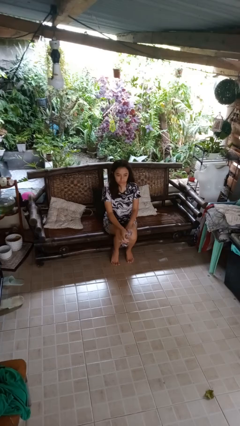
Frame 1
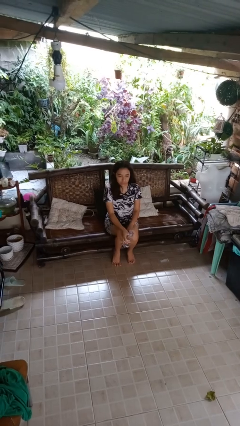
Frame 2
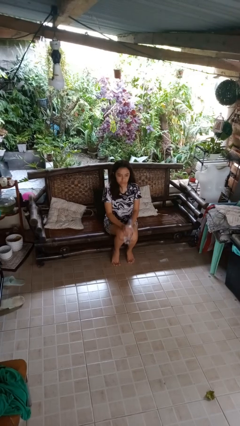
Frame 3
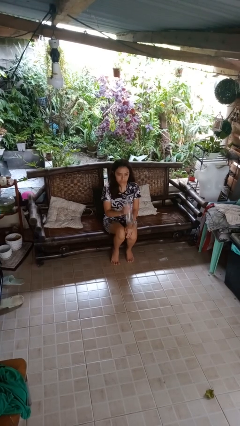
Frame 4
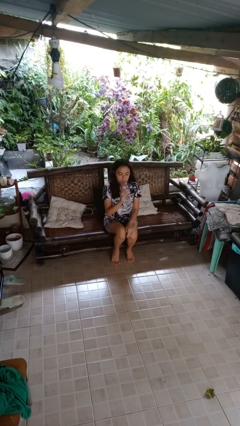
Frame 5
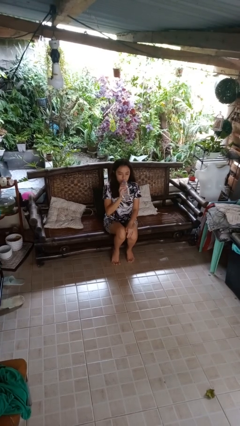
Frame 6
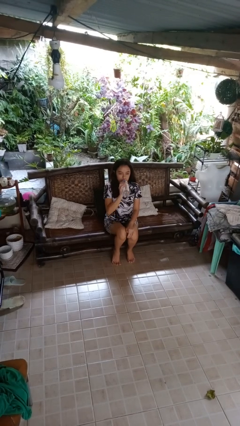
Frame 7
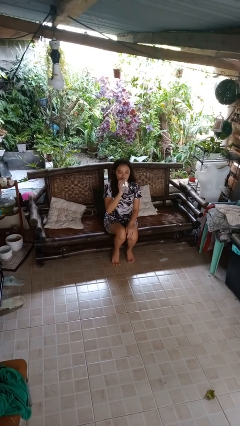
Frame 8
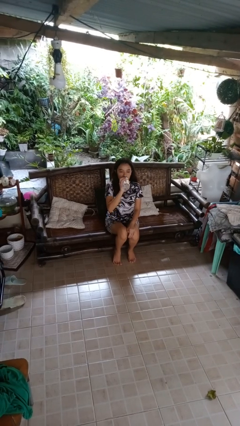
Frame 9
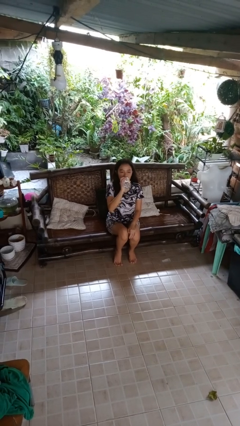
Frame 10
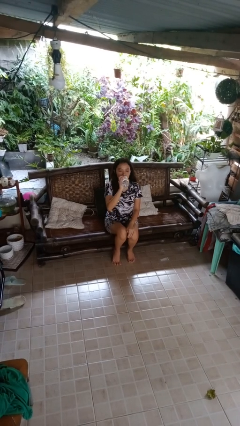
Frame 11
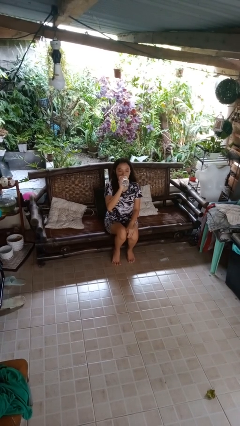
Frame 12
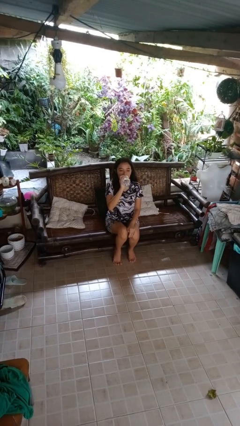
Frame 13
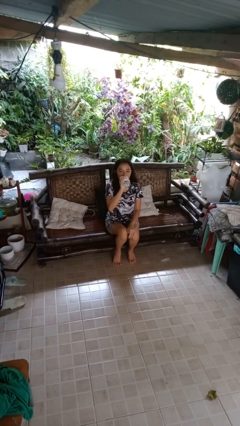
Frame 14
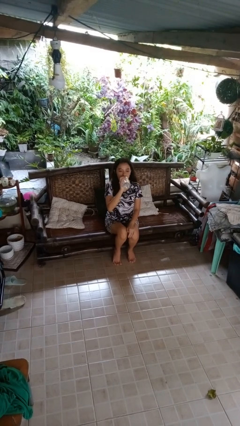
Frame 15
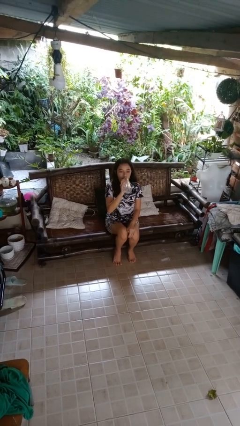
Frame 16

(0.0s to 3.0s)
person drinks from bottle

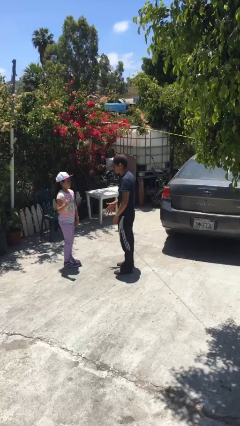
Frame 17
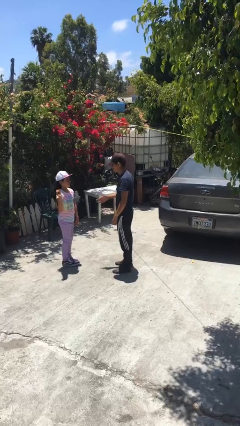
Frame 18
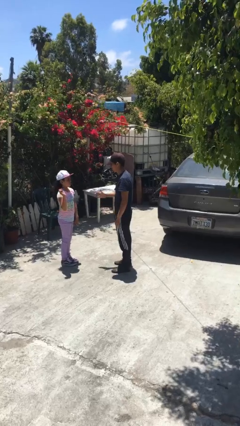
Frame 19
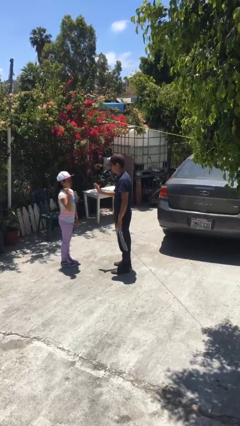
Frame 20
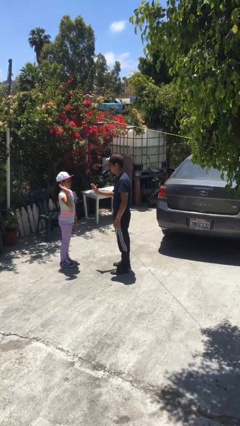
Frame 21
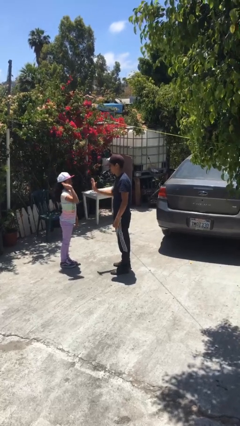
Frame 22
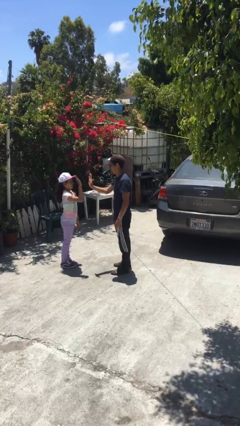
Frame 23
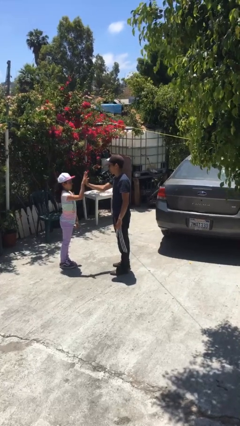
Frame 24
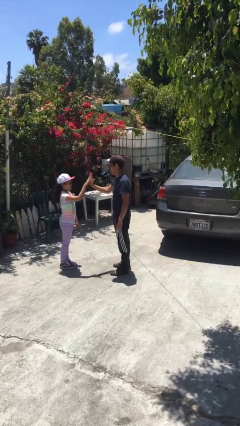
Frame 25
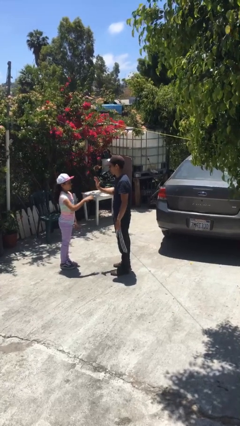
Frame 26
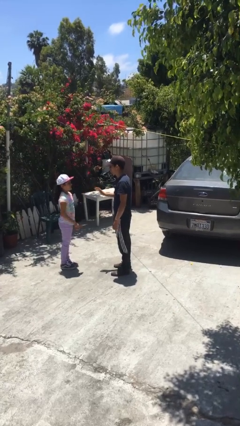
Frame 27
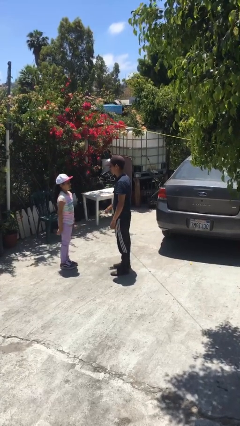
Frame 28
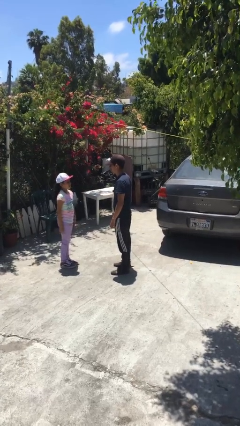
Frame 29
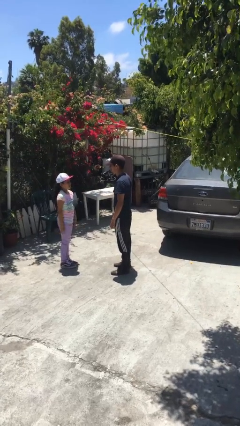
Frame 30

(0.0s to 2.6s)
person highfives hand

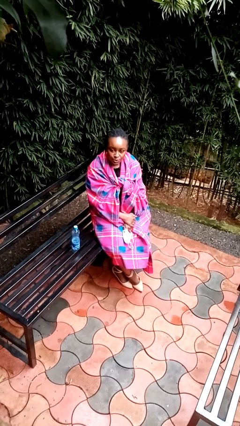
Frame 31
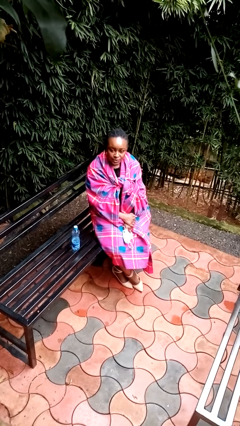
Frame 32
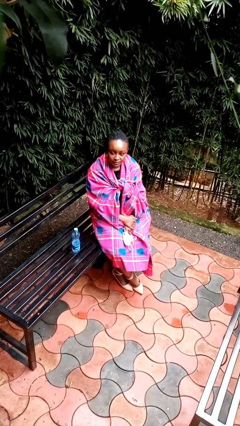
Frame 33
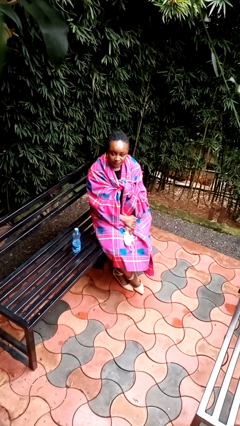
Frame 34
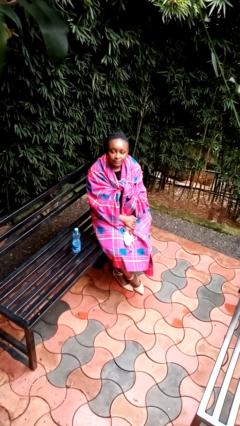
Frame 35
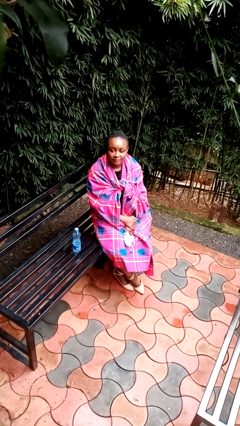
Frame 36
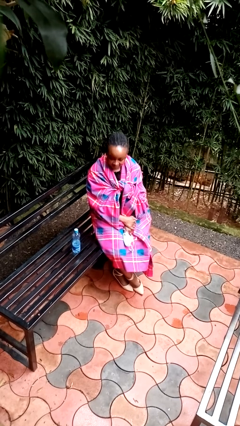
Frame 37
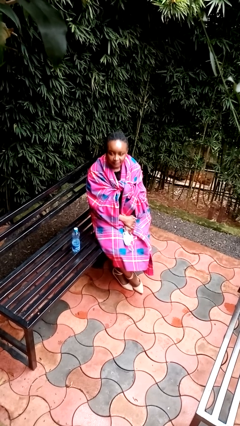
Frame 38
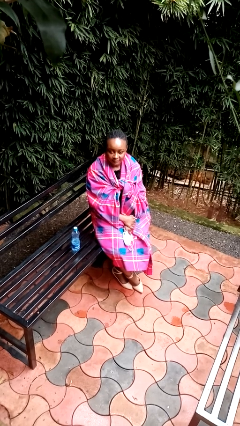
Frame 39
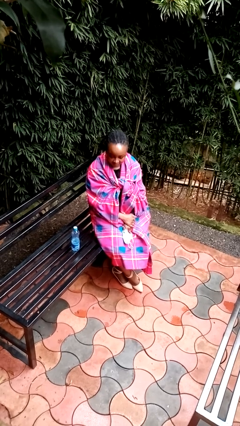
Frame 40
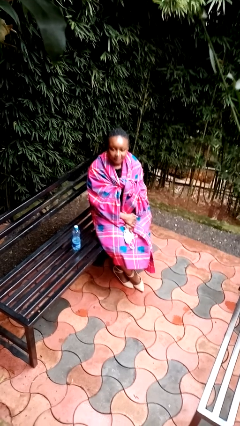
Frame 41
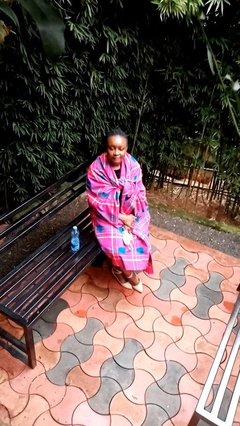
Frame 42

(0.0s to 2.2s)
person nods head

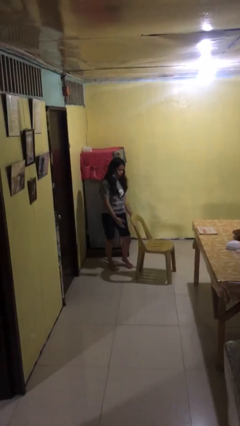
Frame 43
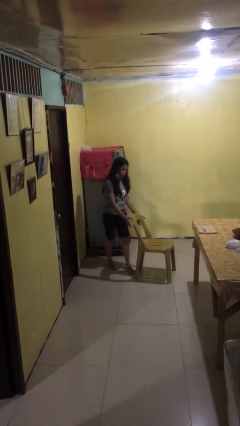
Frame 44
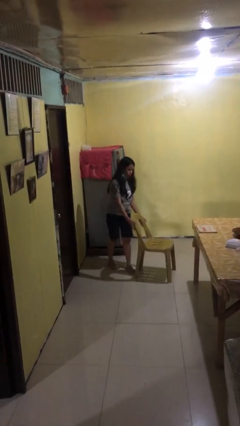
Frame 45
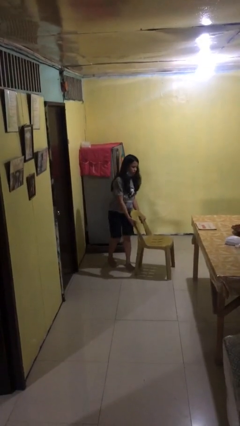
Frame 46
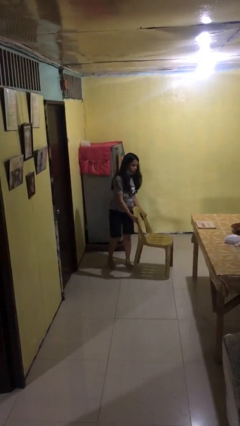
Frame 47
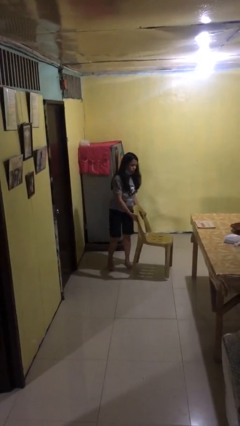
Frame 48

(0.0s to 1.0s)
person picks up object from floor

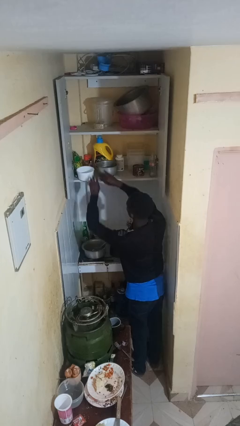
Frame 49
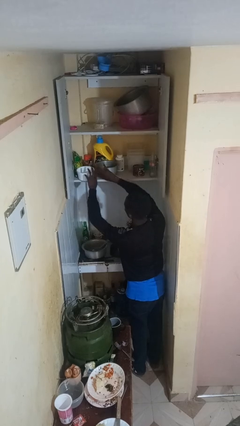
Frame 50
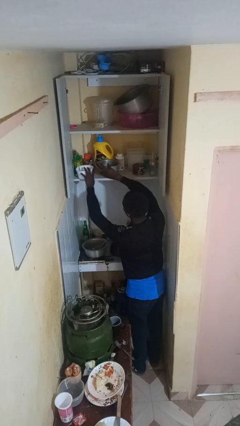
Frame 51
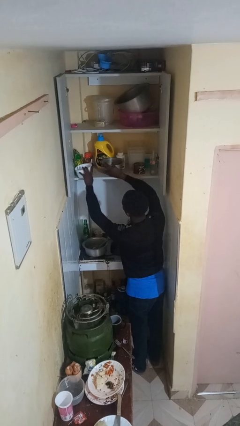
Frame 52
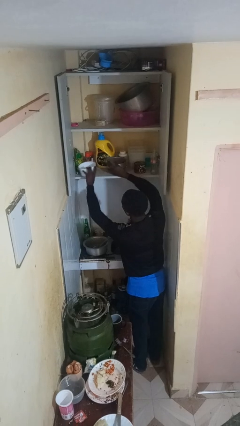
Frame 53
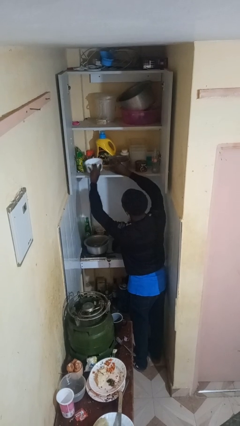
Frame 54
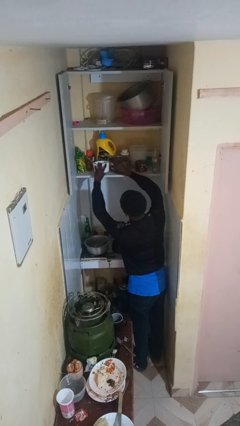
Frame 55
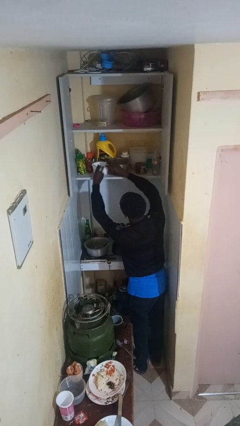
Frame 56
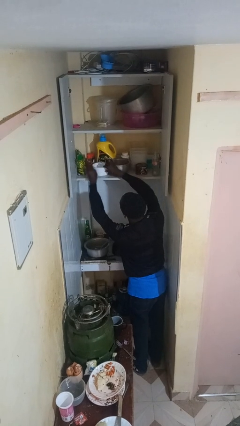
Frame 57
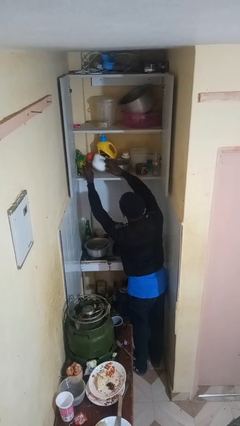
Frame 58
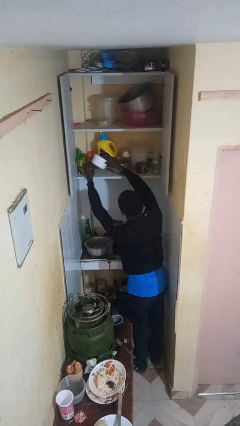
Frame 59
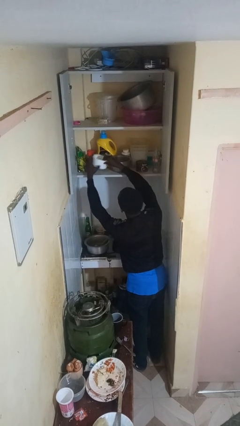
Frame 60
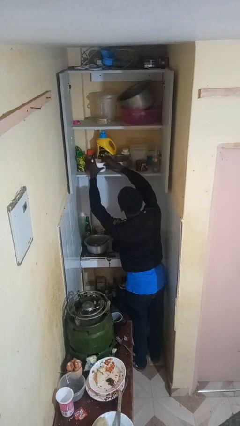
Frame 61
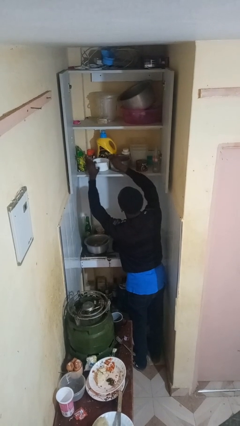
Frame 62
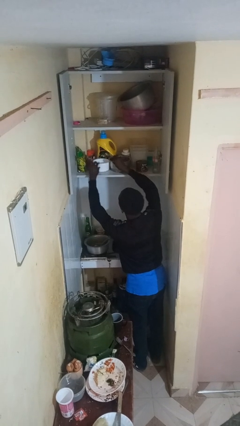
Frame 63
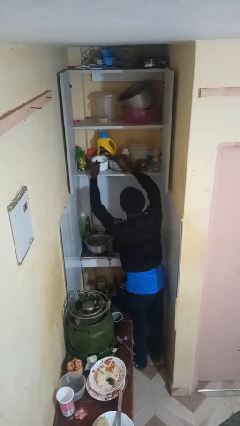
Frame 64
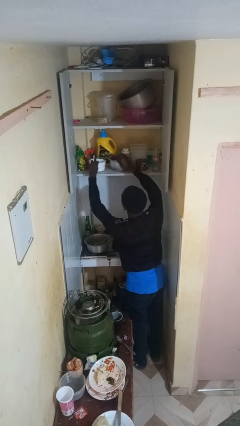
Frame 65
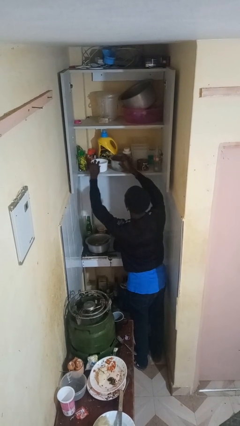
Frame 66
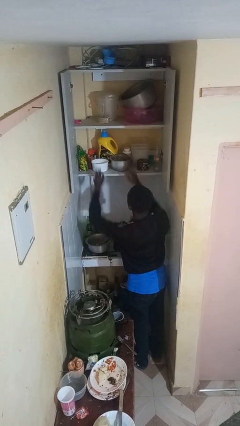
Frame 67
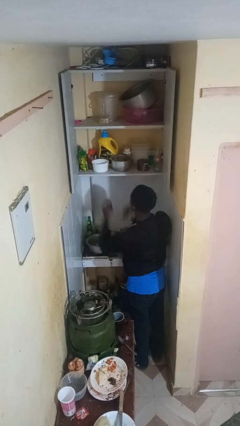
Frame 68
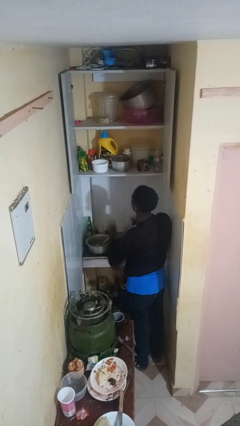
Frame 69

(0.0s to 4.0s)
person searches in kitchen drawer

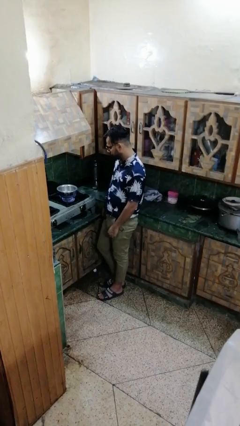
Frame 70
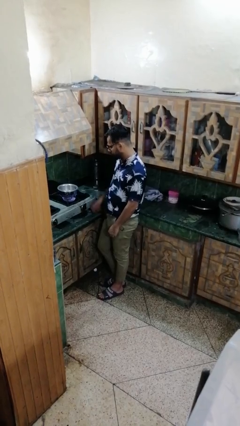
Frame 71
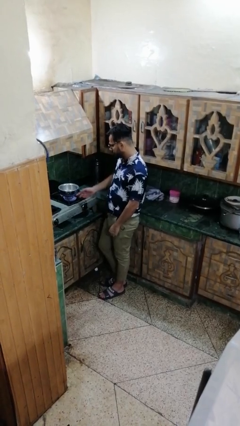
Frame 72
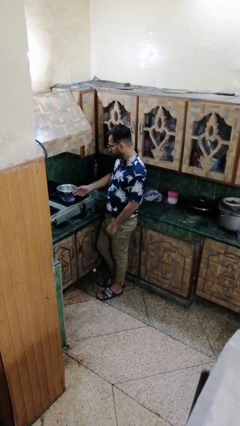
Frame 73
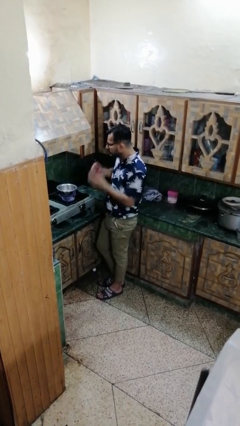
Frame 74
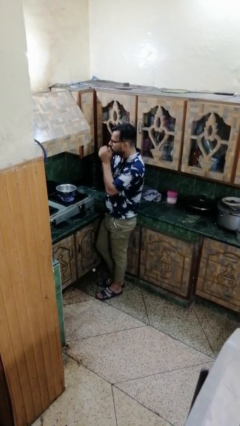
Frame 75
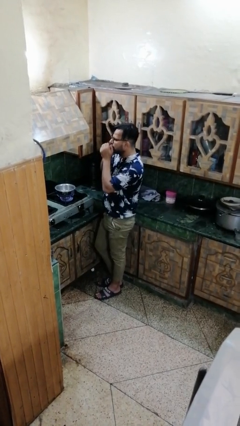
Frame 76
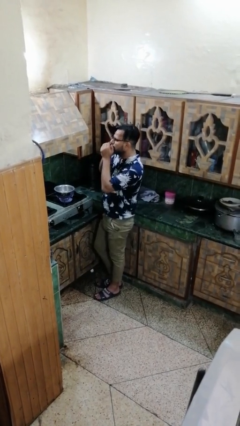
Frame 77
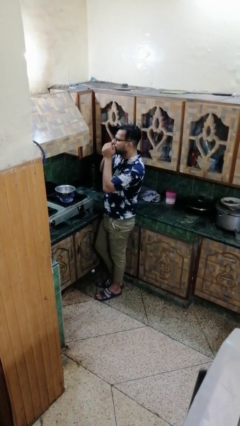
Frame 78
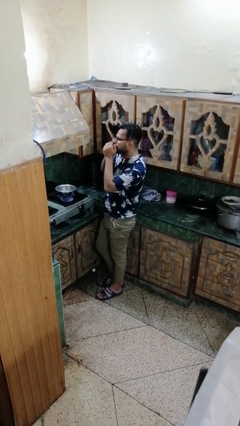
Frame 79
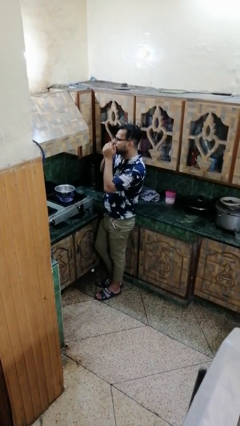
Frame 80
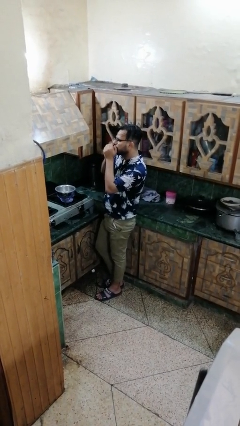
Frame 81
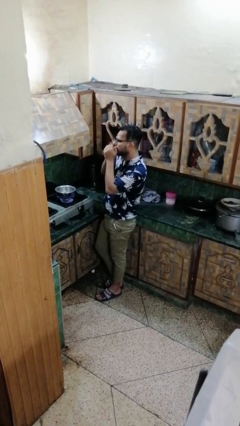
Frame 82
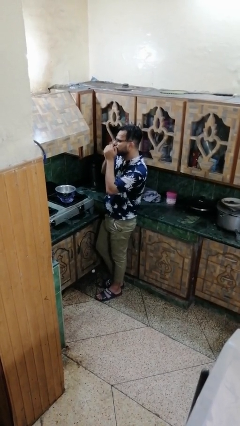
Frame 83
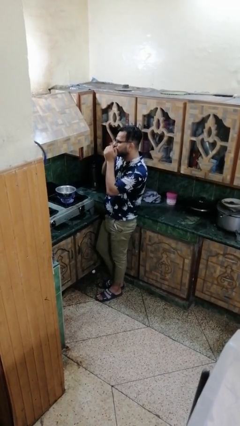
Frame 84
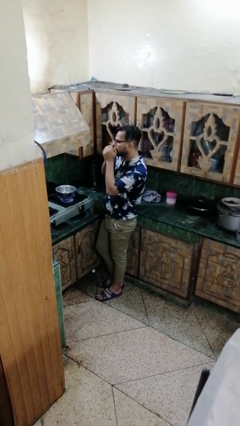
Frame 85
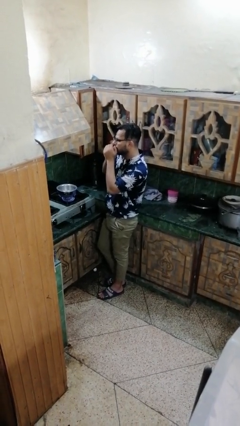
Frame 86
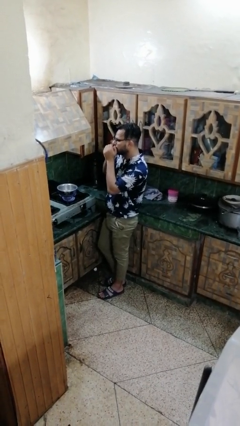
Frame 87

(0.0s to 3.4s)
person burns hand

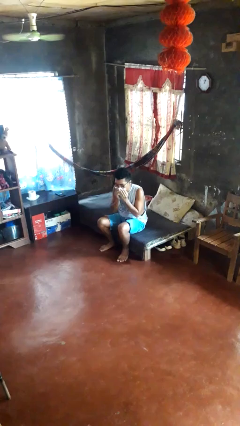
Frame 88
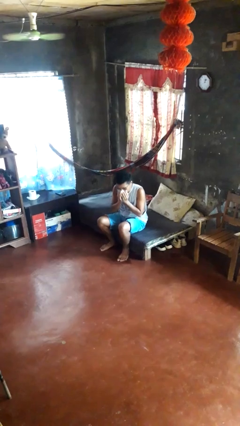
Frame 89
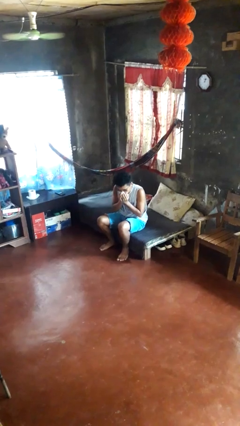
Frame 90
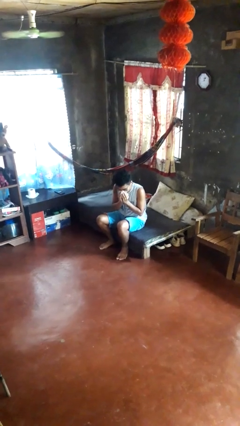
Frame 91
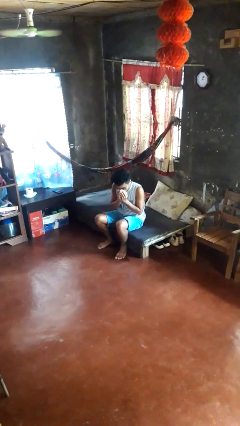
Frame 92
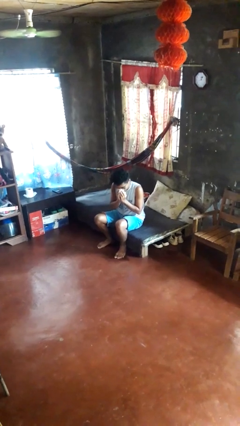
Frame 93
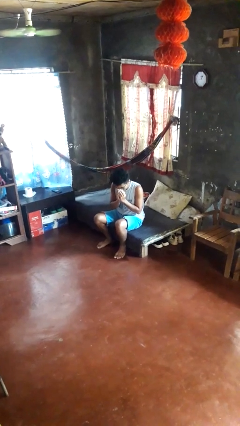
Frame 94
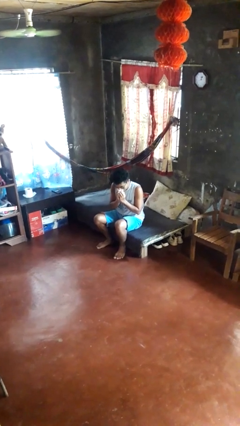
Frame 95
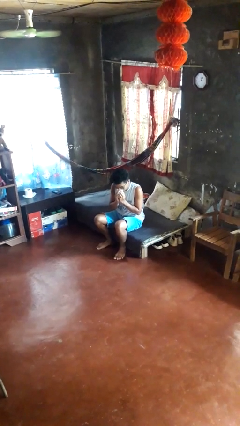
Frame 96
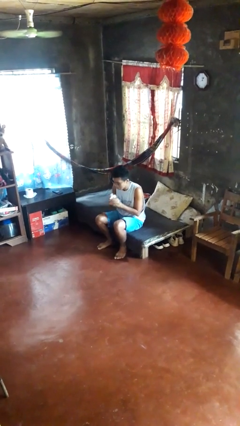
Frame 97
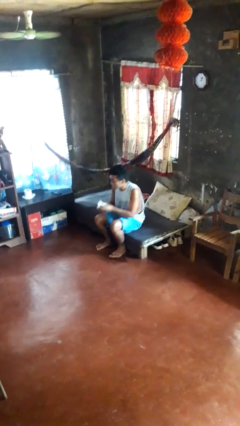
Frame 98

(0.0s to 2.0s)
person blows nose
